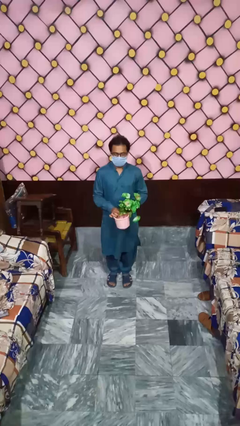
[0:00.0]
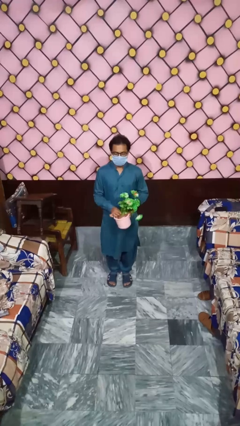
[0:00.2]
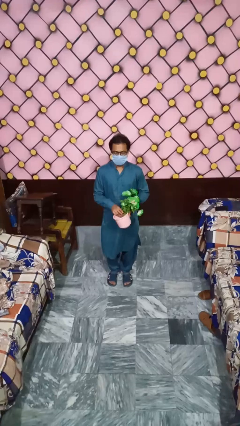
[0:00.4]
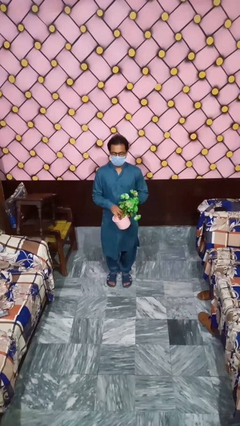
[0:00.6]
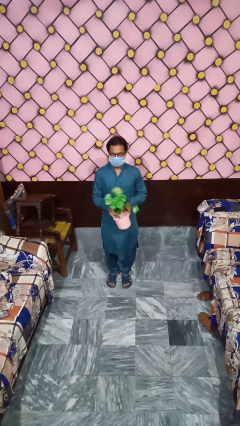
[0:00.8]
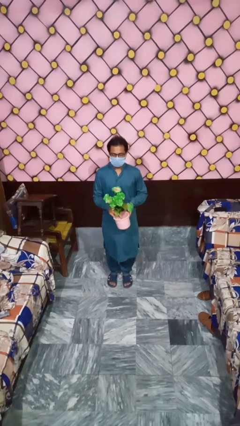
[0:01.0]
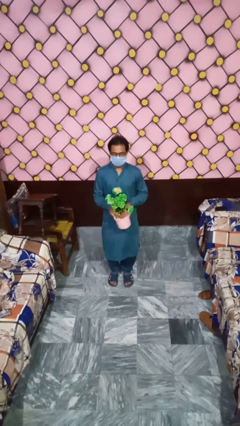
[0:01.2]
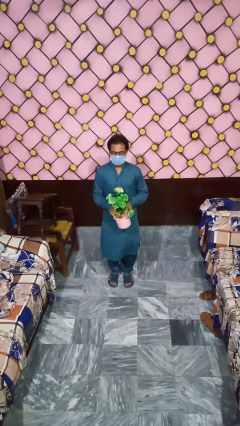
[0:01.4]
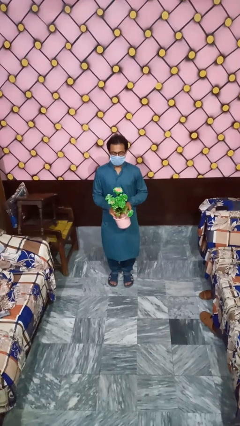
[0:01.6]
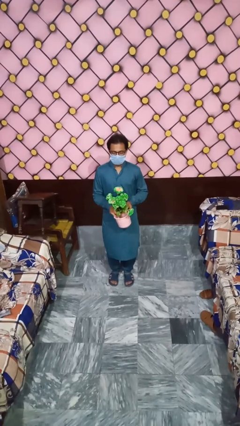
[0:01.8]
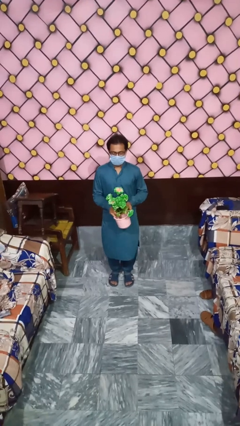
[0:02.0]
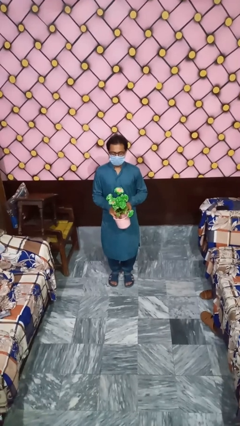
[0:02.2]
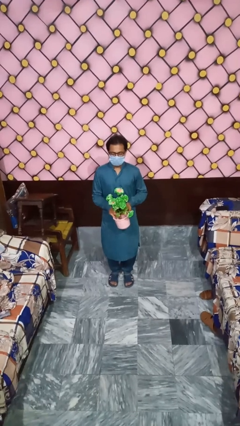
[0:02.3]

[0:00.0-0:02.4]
person arranges flowers in vase

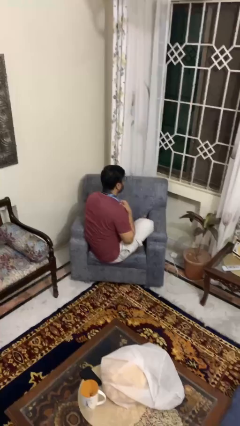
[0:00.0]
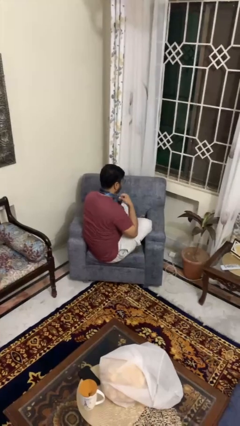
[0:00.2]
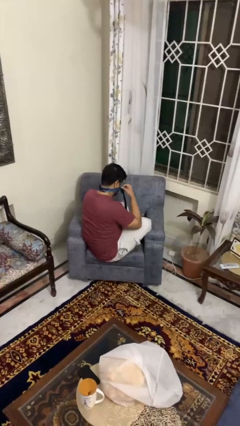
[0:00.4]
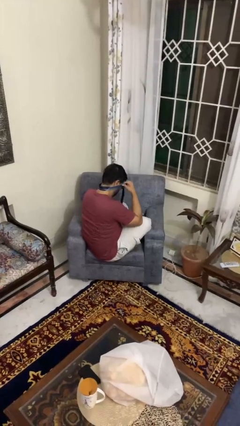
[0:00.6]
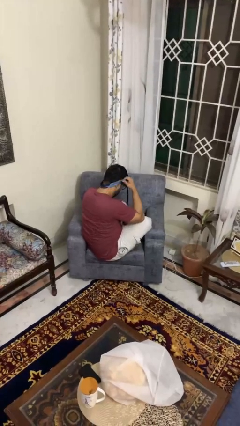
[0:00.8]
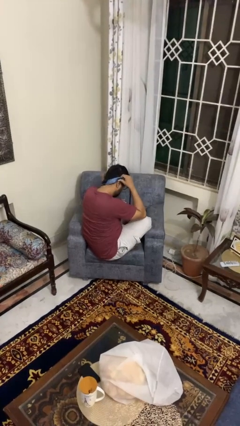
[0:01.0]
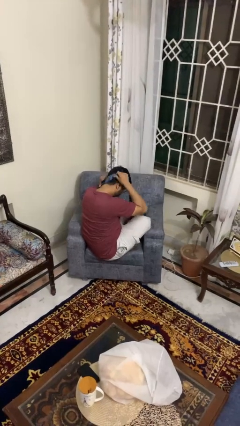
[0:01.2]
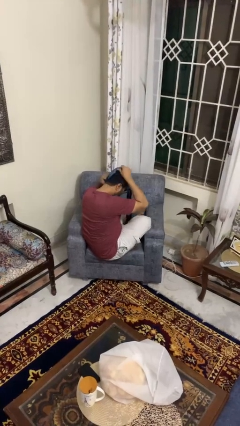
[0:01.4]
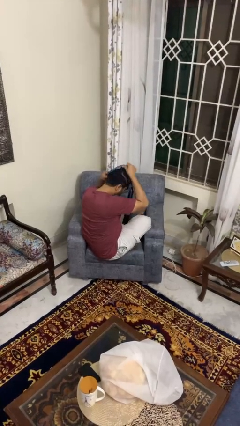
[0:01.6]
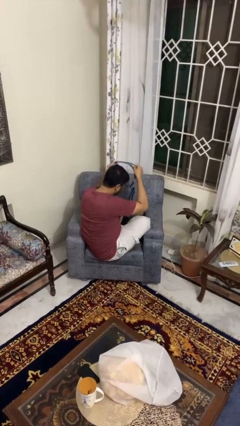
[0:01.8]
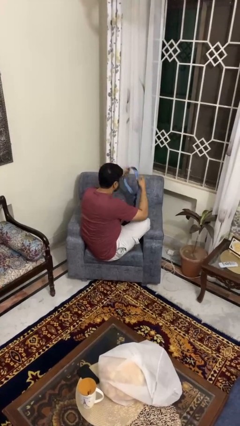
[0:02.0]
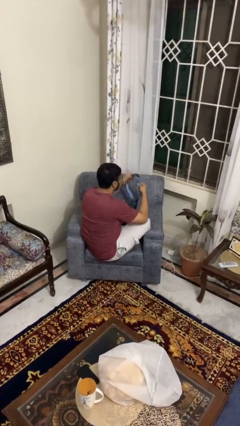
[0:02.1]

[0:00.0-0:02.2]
person takes off necktie

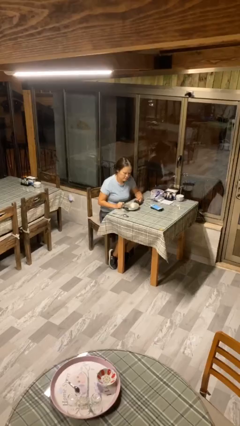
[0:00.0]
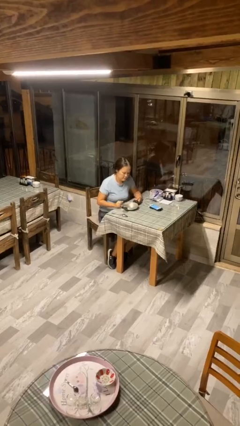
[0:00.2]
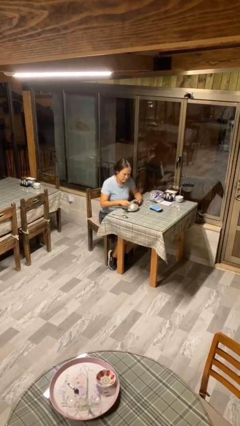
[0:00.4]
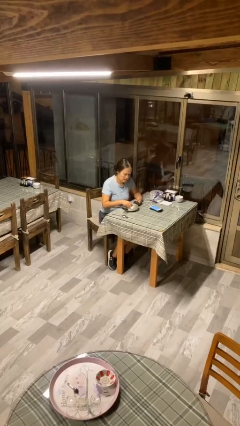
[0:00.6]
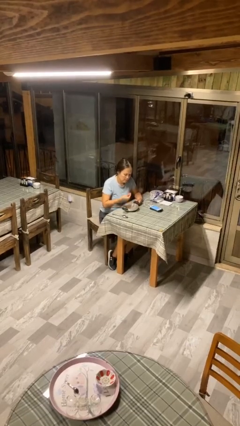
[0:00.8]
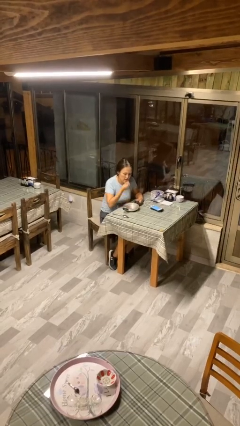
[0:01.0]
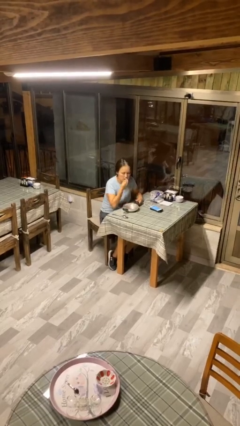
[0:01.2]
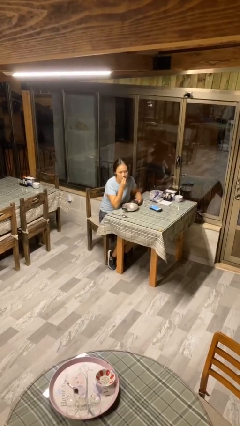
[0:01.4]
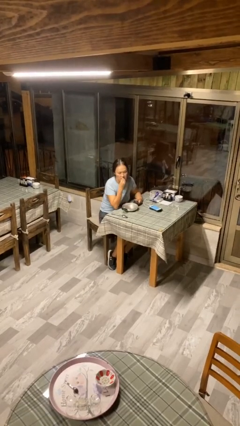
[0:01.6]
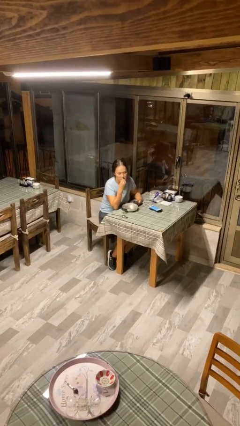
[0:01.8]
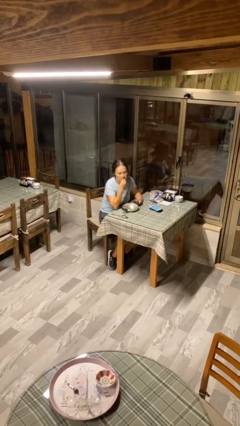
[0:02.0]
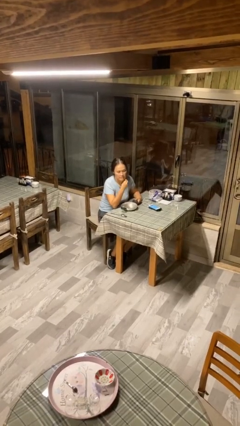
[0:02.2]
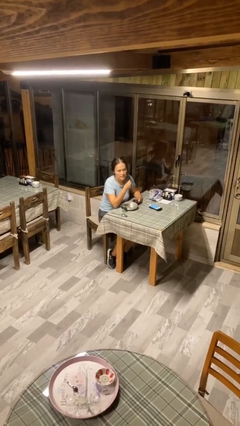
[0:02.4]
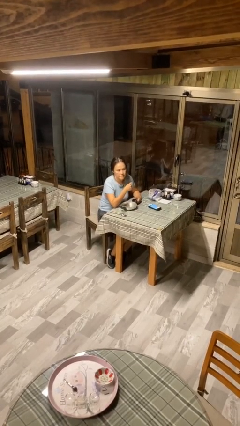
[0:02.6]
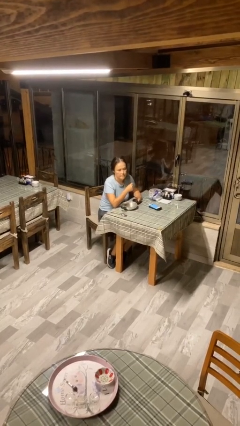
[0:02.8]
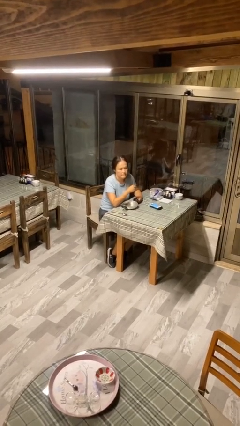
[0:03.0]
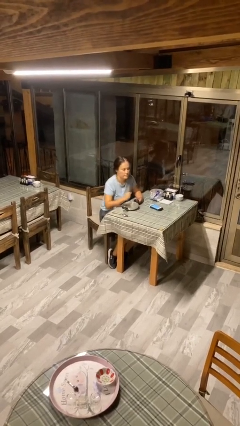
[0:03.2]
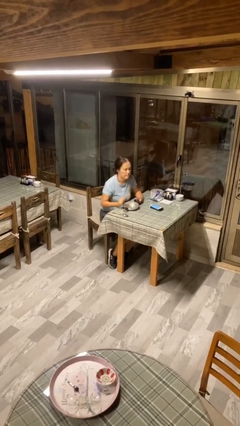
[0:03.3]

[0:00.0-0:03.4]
person eats with hands

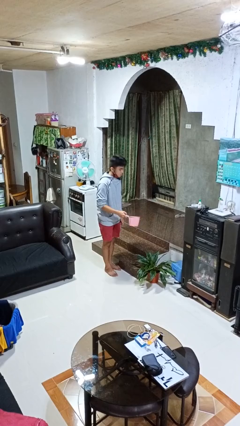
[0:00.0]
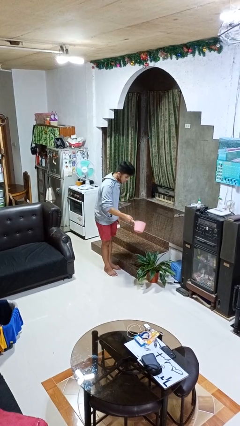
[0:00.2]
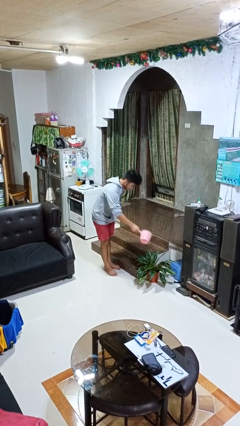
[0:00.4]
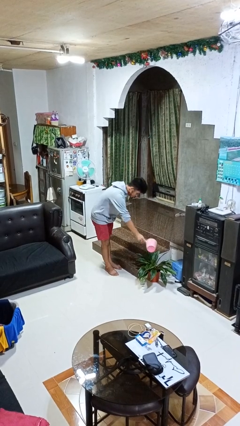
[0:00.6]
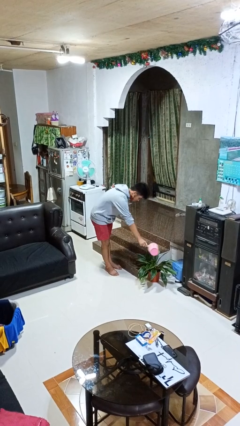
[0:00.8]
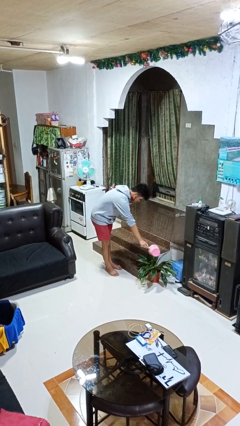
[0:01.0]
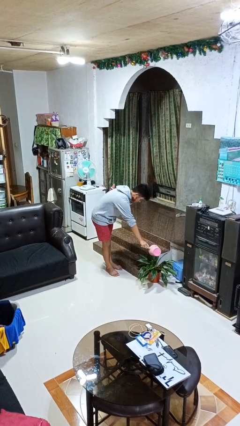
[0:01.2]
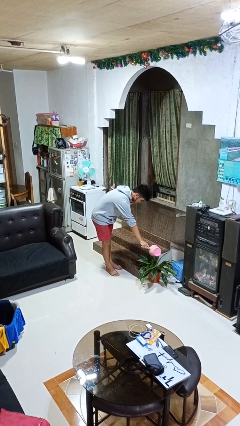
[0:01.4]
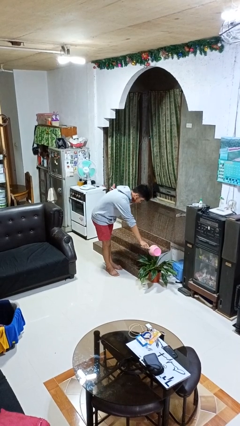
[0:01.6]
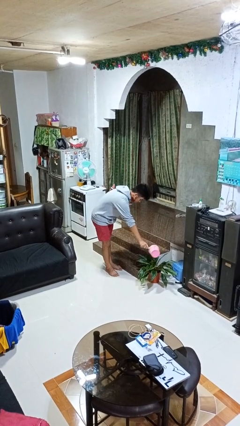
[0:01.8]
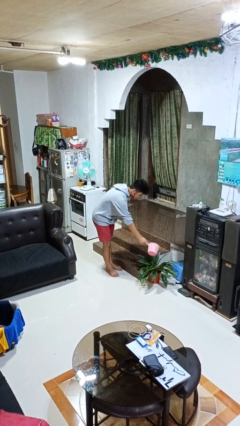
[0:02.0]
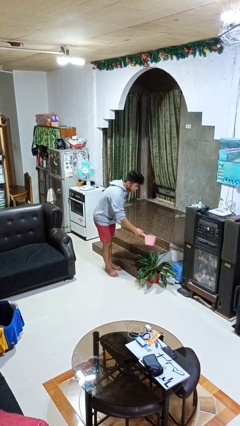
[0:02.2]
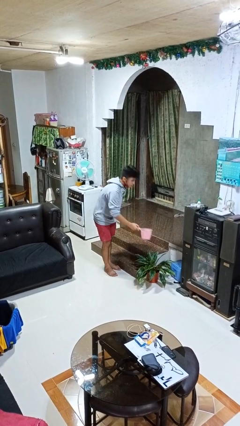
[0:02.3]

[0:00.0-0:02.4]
person waters houseplant

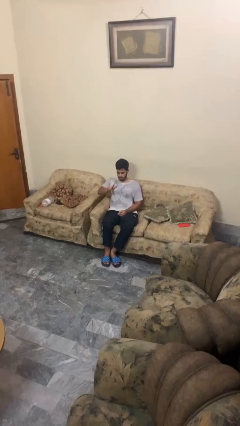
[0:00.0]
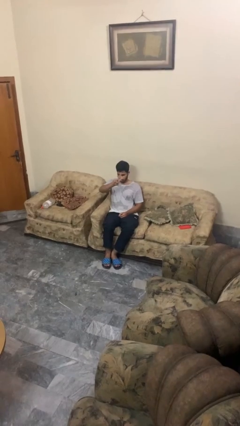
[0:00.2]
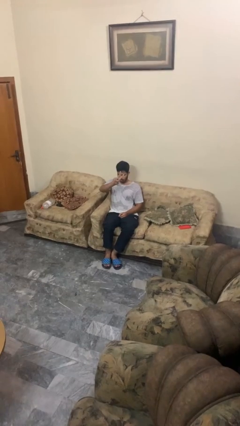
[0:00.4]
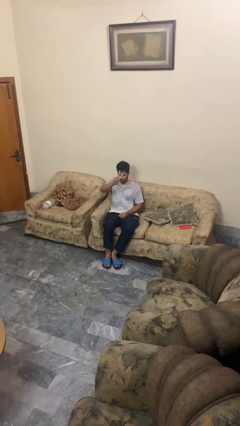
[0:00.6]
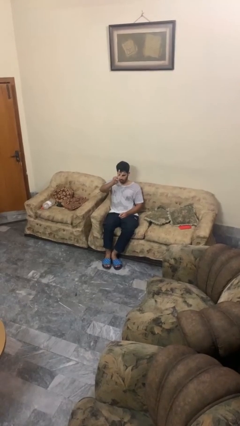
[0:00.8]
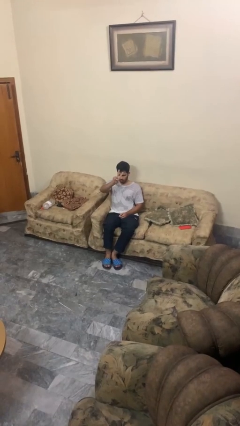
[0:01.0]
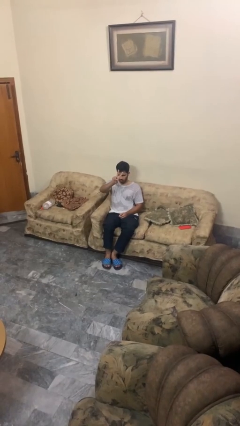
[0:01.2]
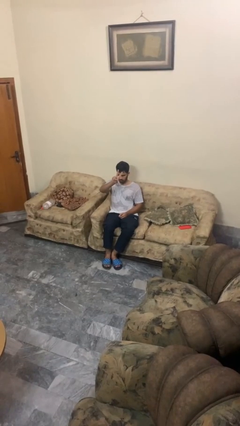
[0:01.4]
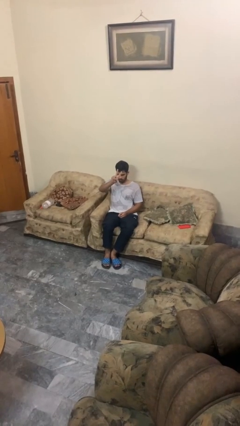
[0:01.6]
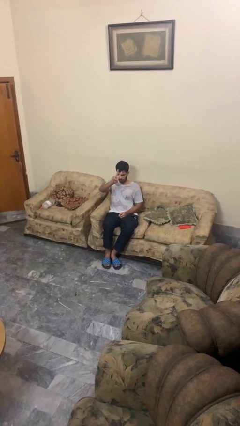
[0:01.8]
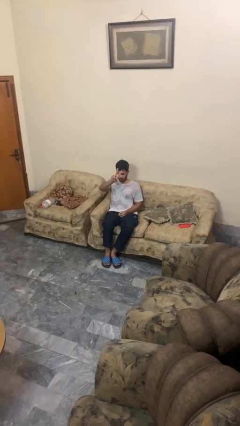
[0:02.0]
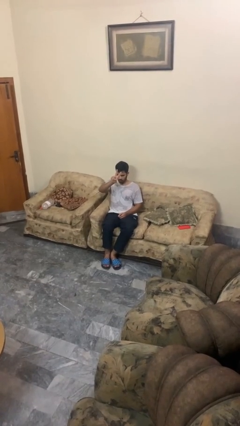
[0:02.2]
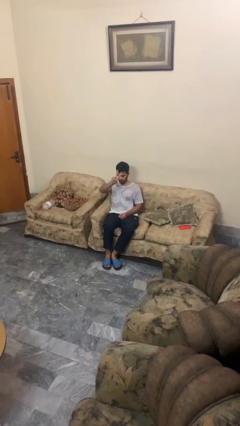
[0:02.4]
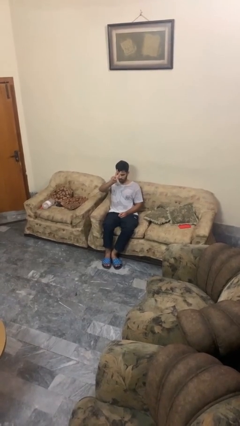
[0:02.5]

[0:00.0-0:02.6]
person gestures peace

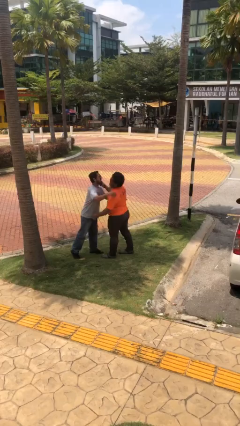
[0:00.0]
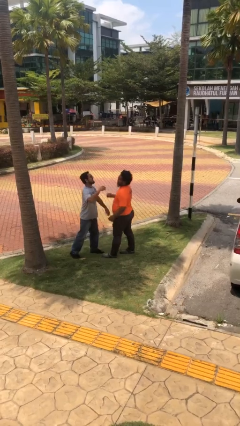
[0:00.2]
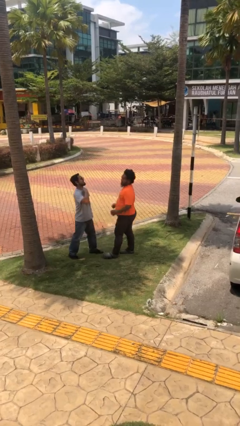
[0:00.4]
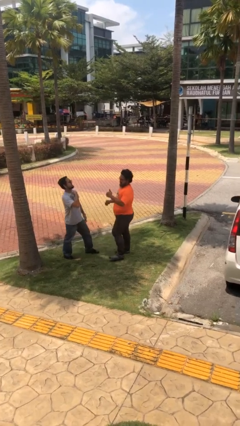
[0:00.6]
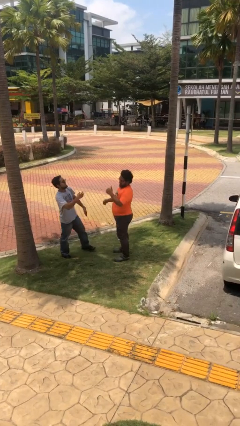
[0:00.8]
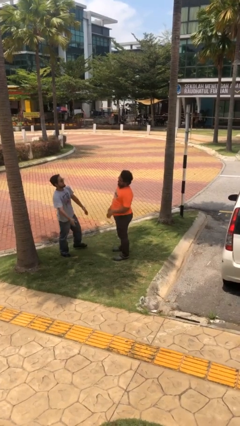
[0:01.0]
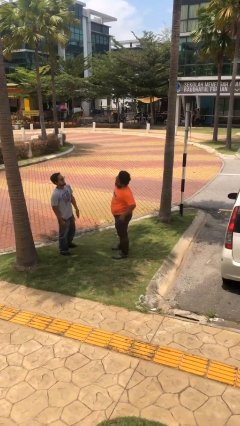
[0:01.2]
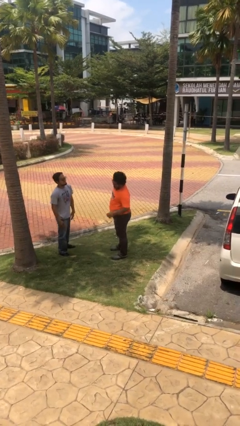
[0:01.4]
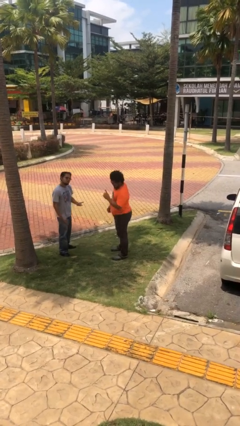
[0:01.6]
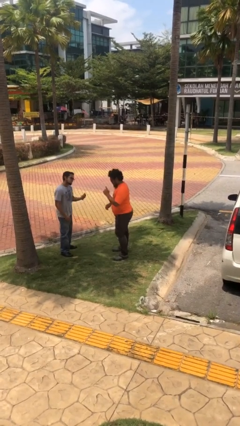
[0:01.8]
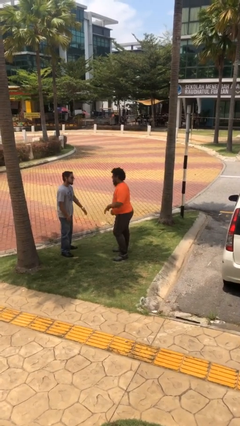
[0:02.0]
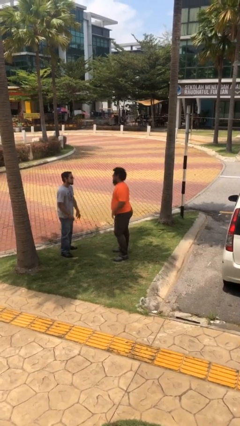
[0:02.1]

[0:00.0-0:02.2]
person talks to person

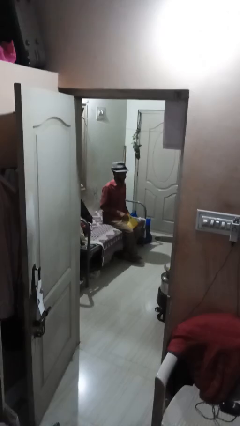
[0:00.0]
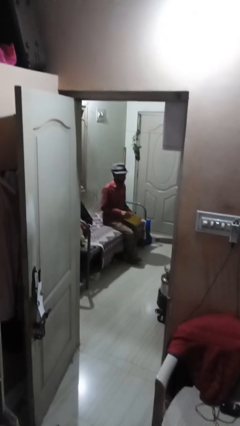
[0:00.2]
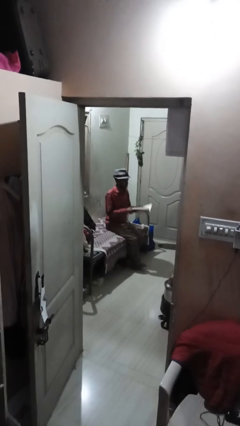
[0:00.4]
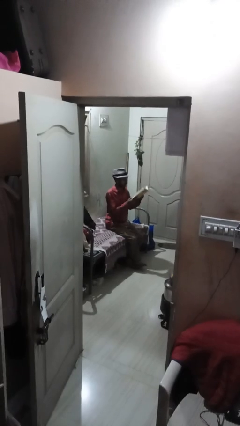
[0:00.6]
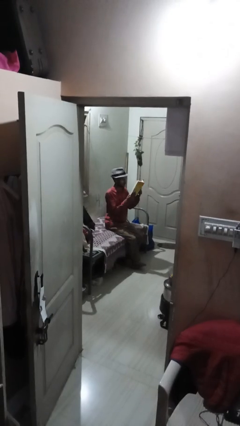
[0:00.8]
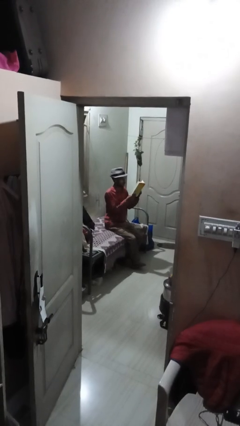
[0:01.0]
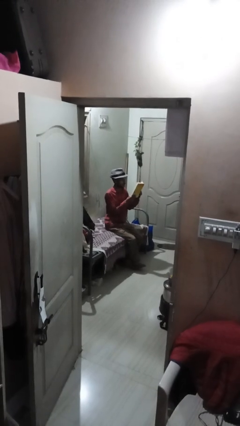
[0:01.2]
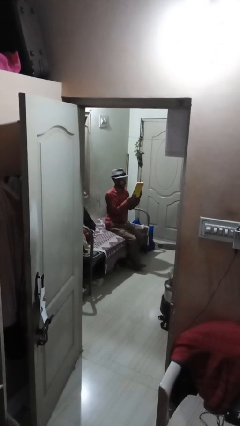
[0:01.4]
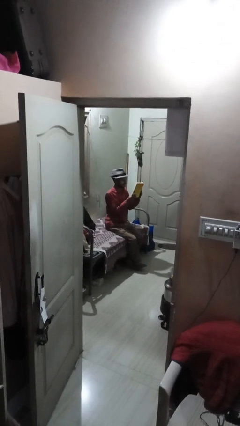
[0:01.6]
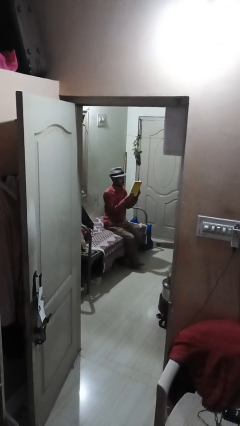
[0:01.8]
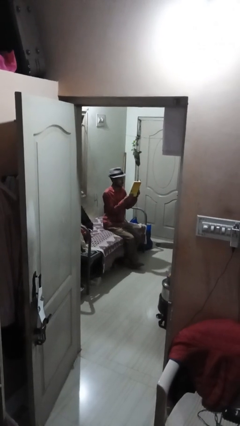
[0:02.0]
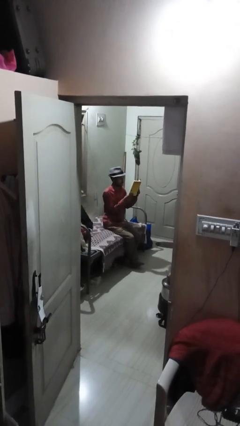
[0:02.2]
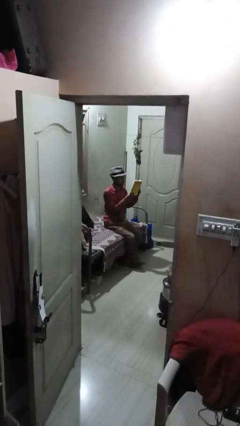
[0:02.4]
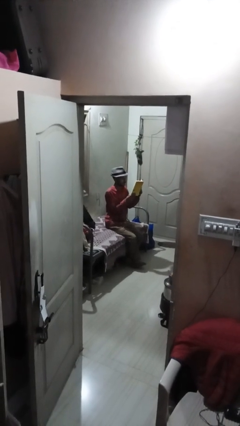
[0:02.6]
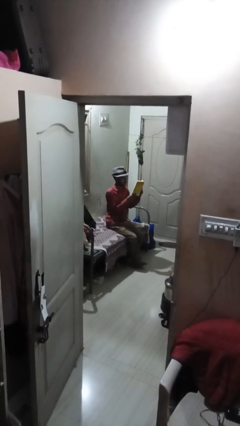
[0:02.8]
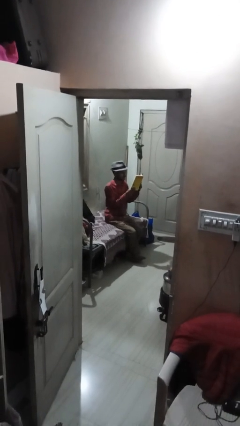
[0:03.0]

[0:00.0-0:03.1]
person reads book
